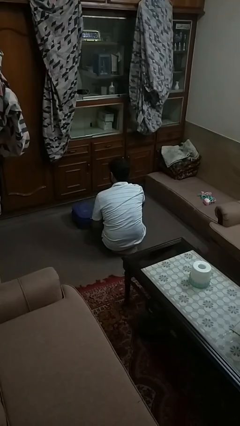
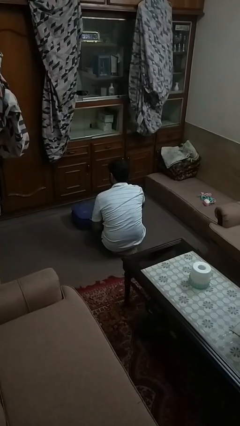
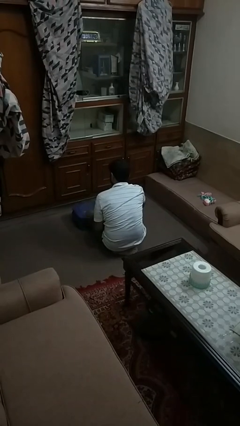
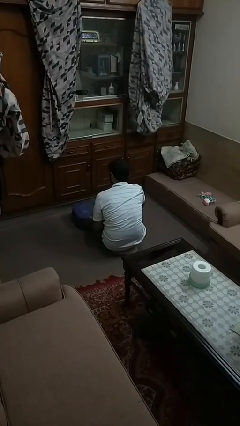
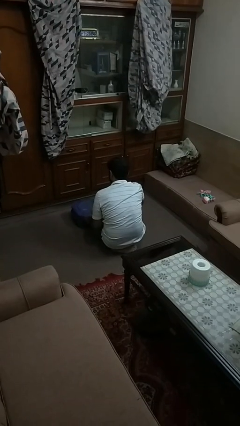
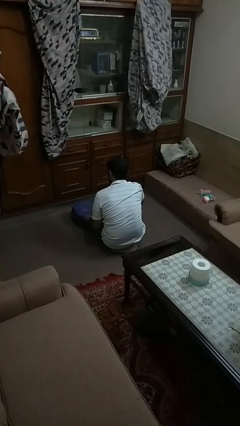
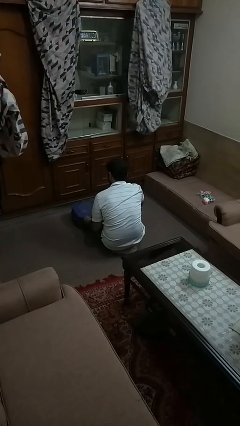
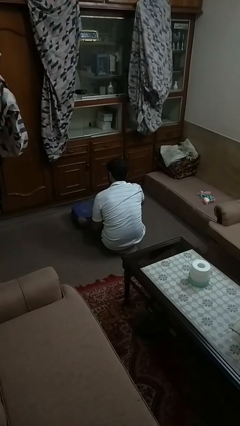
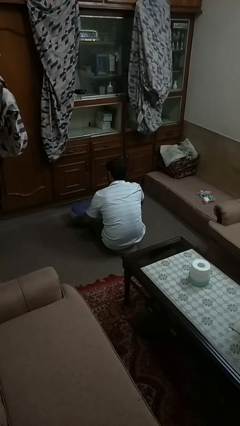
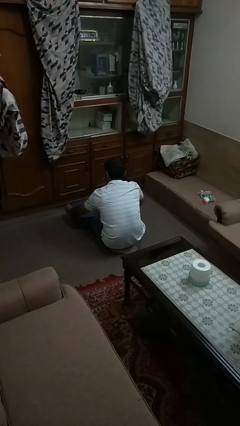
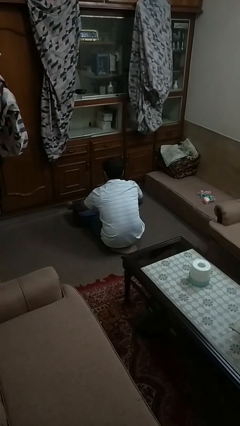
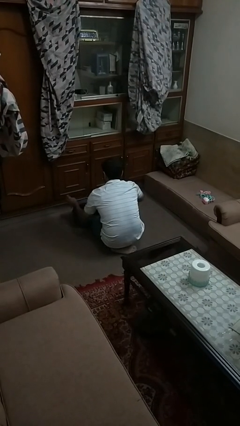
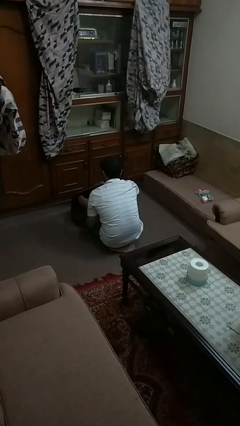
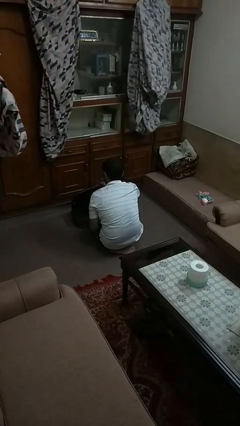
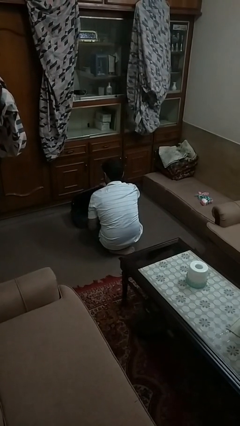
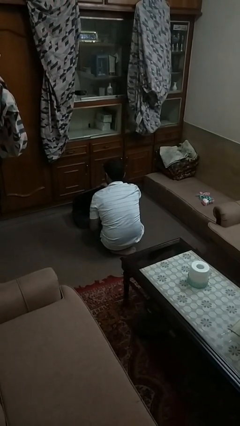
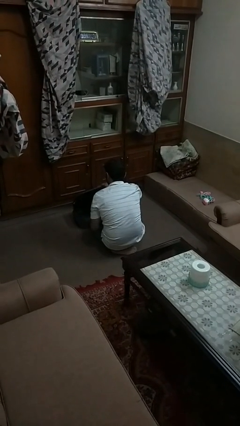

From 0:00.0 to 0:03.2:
person opens suitcase

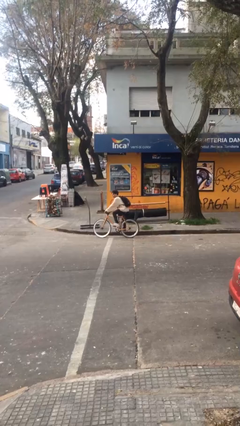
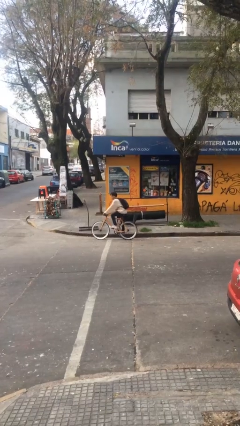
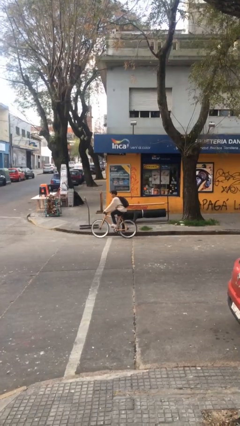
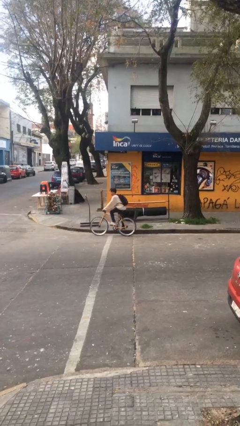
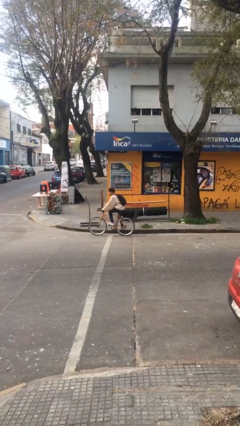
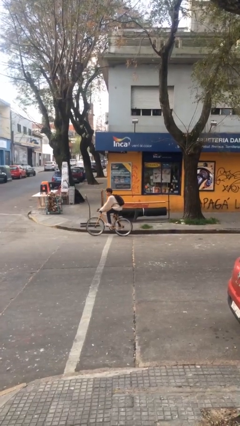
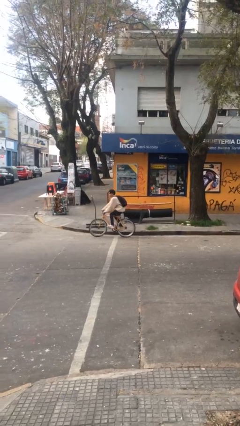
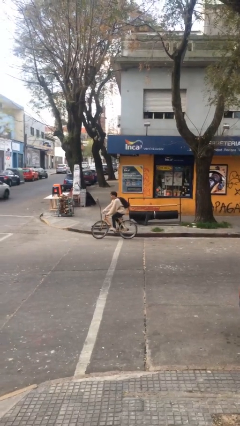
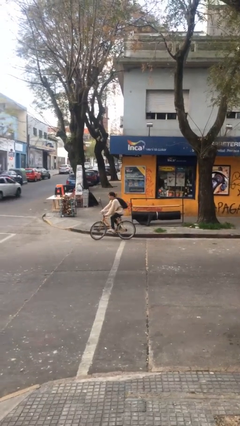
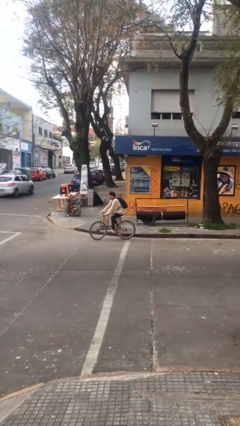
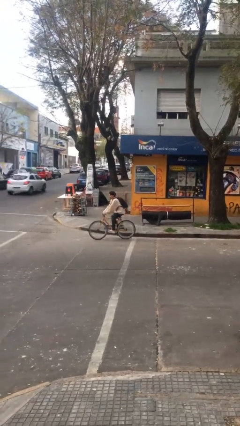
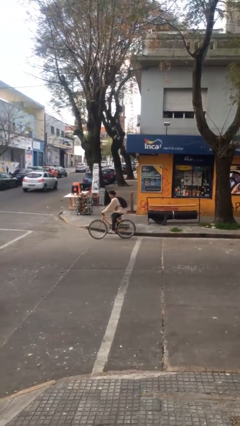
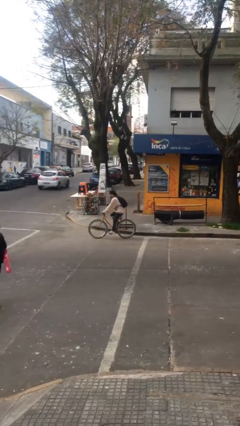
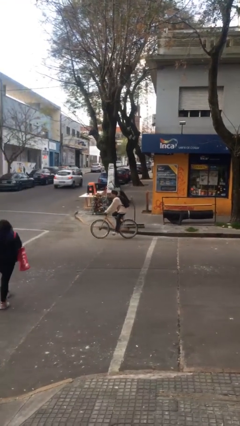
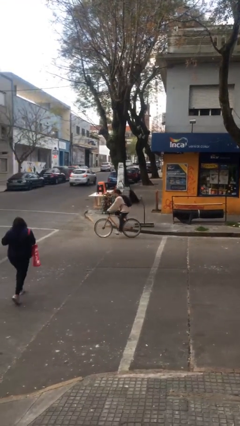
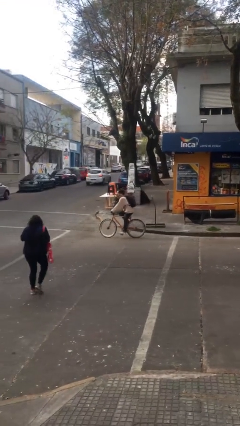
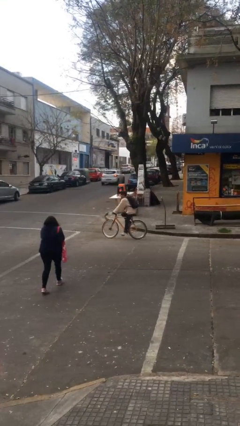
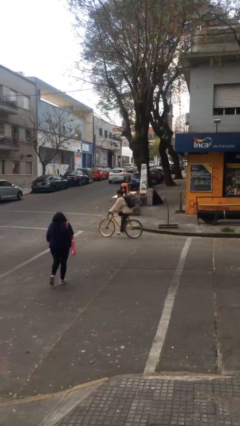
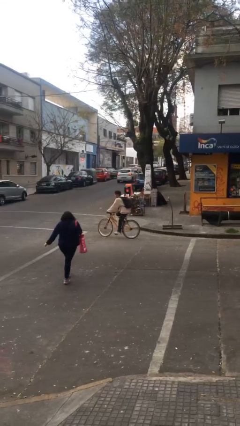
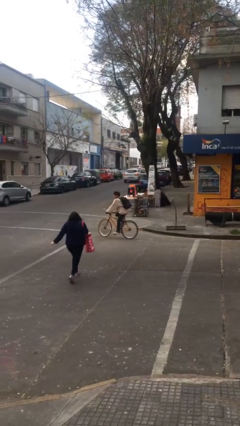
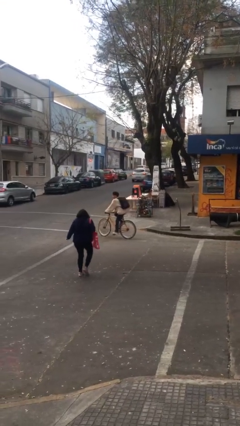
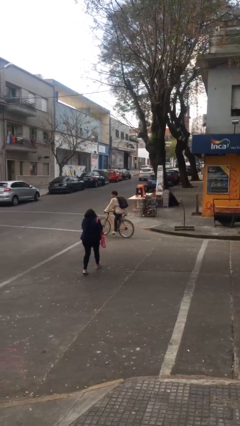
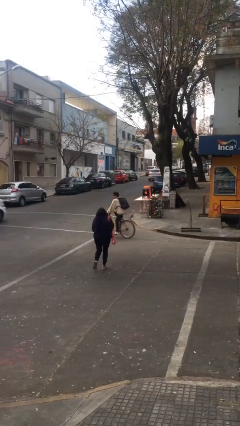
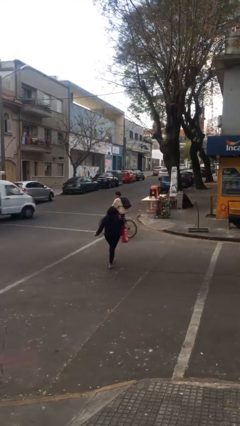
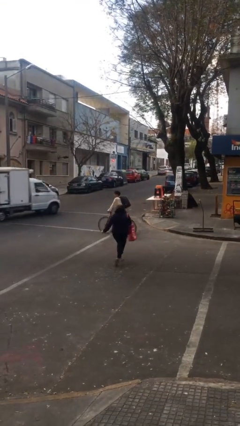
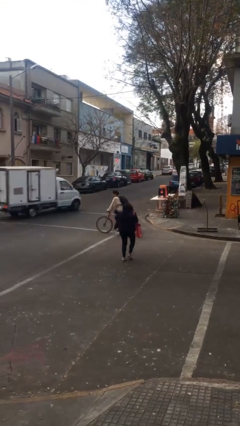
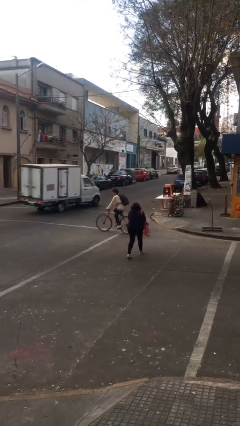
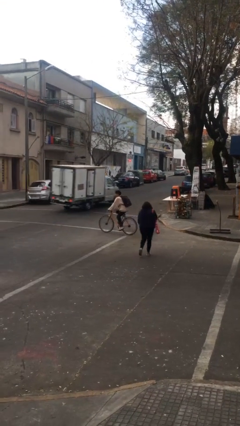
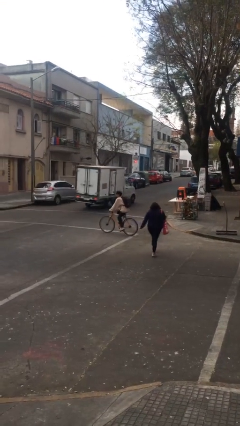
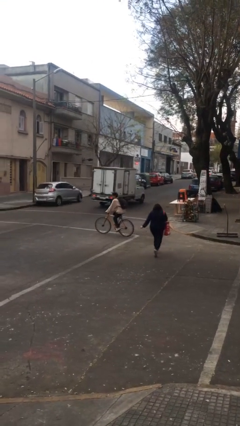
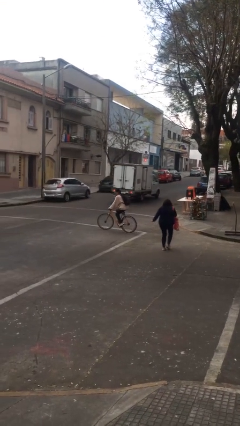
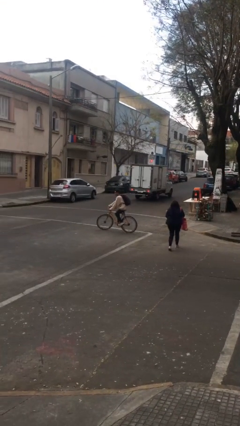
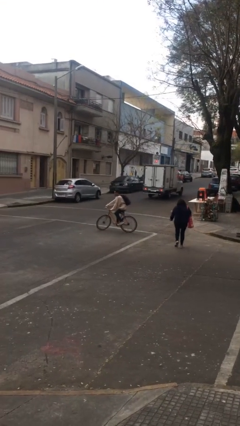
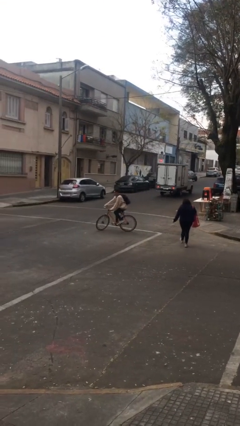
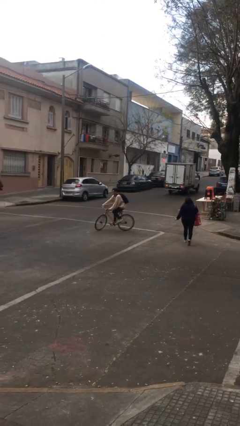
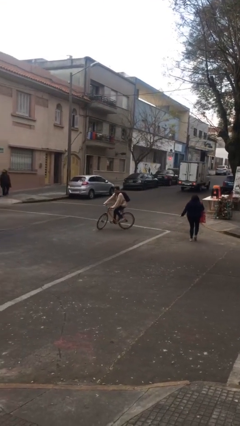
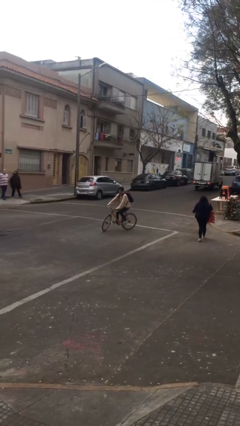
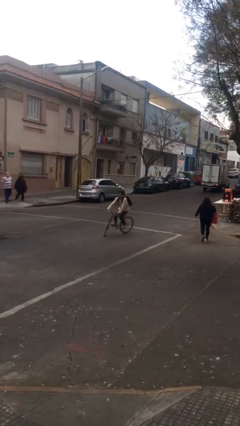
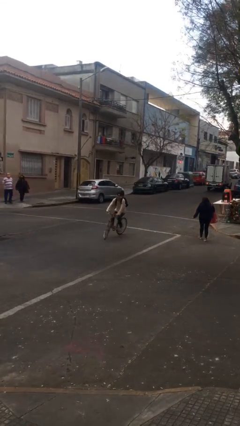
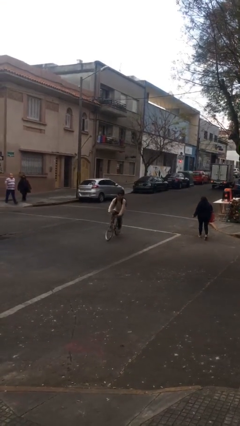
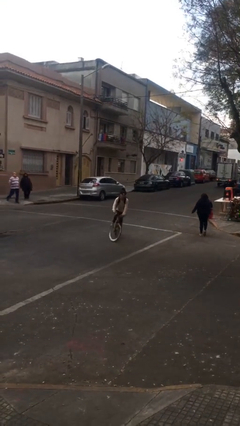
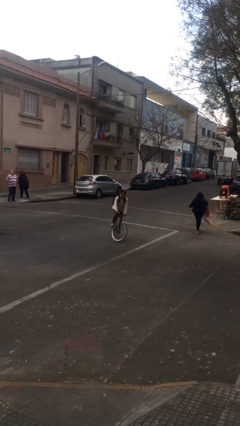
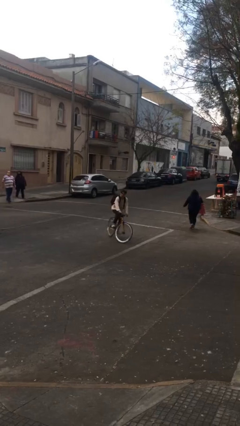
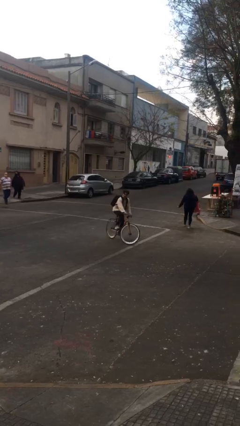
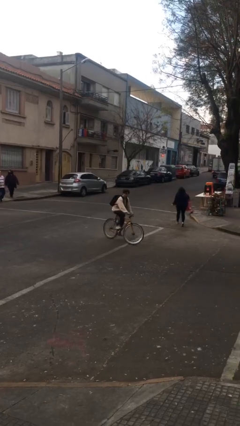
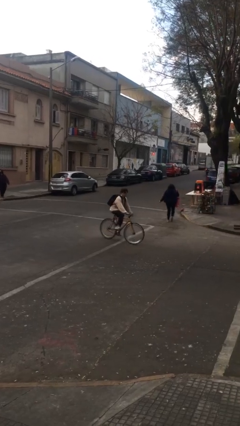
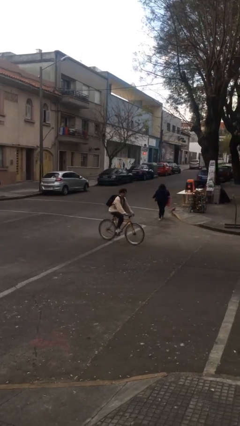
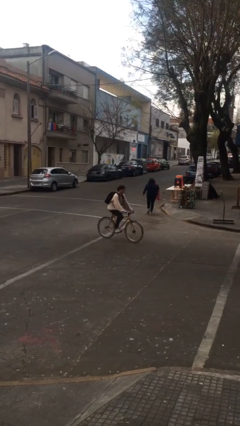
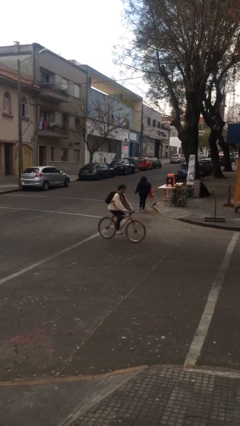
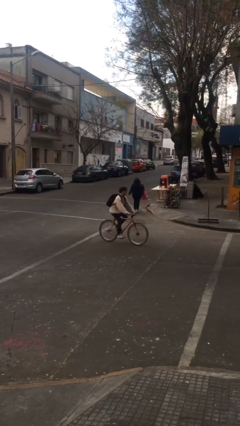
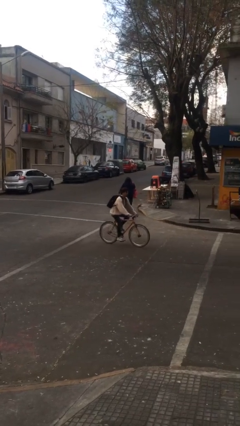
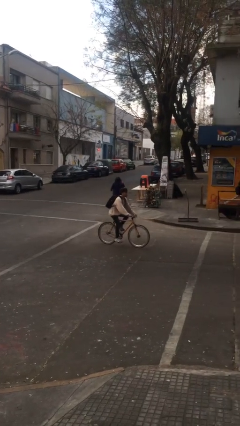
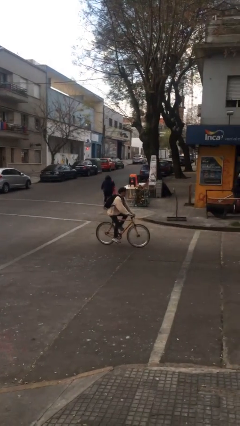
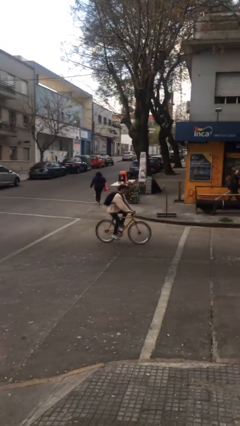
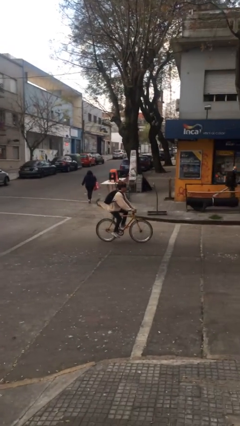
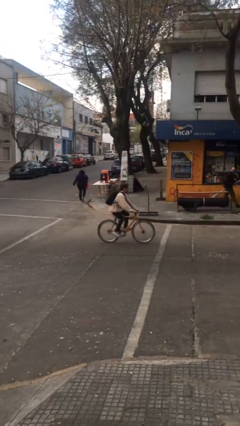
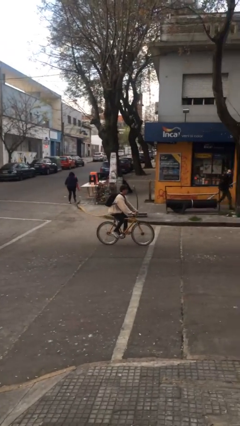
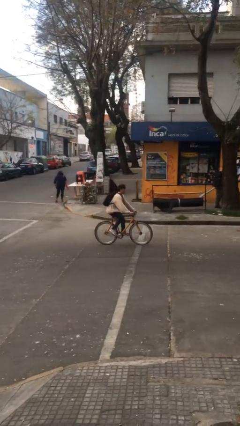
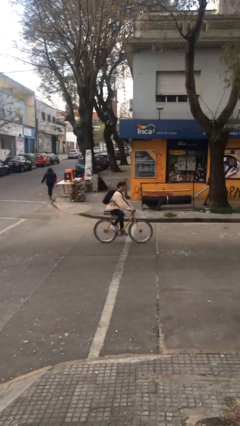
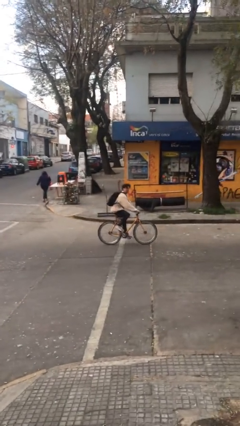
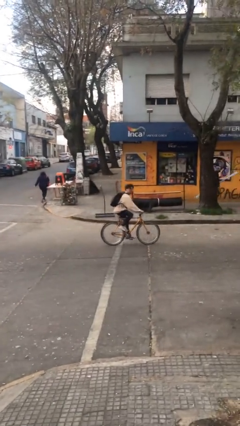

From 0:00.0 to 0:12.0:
person rides bicycle

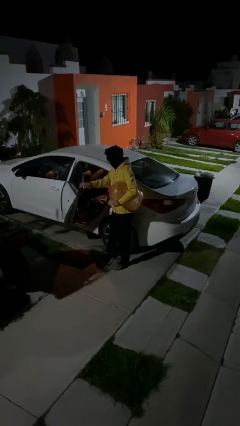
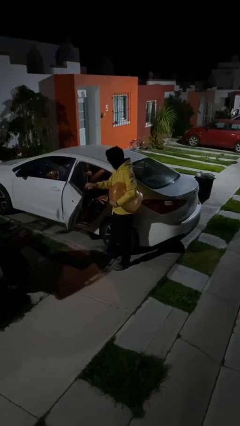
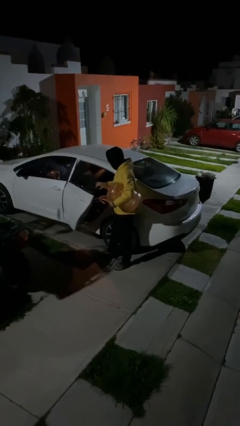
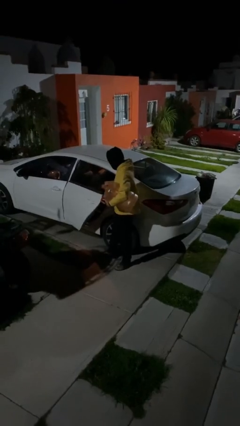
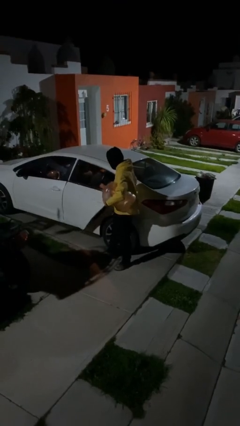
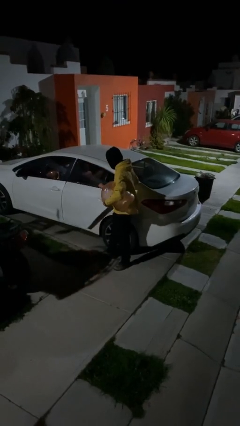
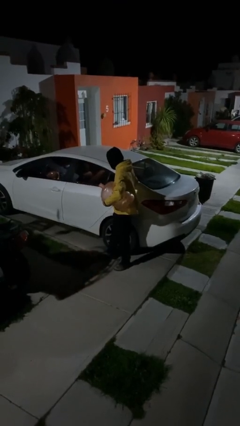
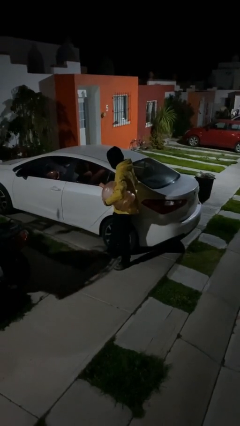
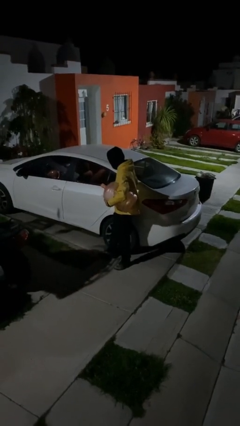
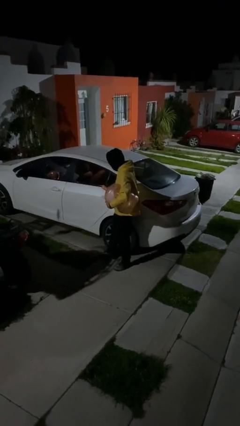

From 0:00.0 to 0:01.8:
person closes car door

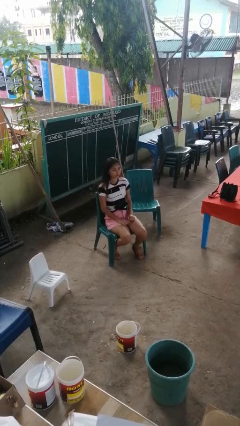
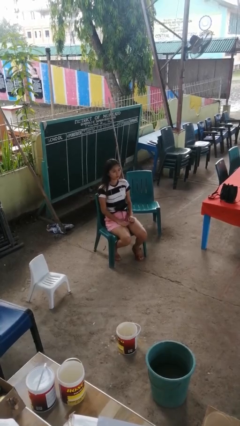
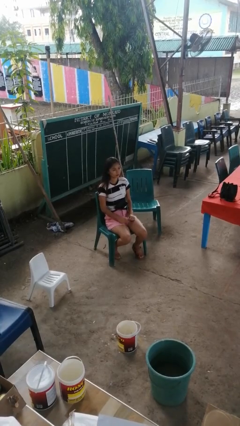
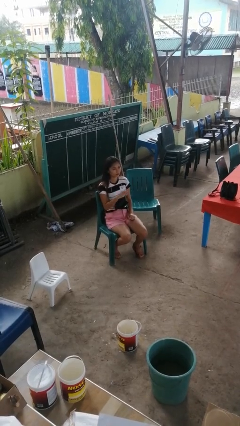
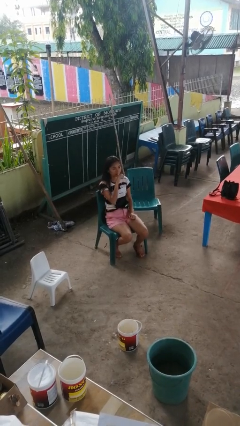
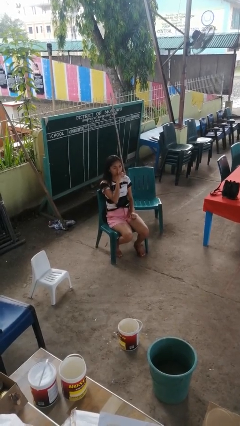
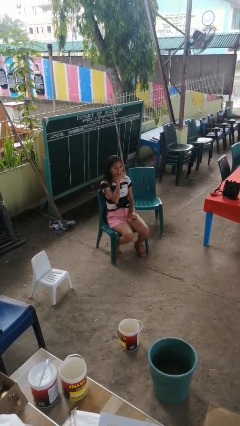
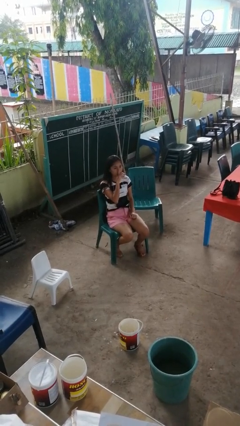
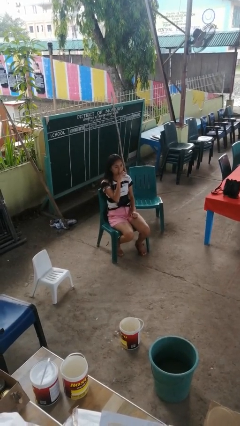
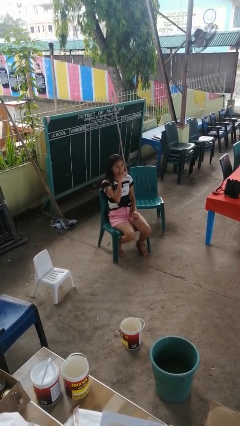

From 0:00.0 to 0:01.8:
person gestures be quiet
